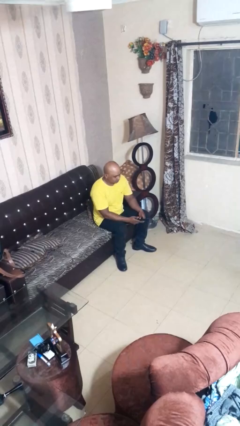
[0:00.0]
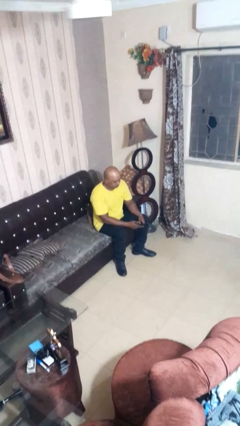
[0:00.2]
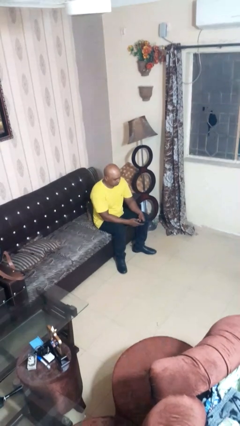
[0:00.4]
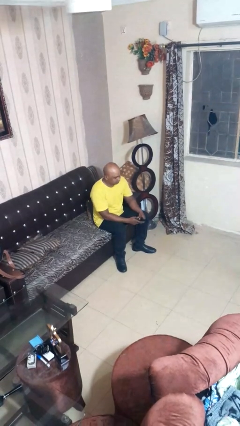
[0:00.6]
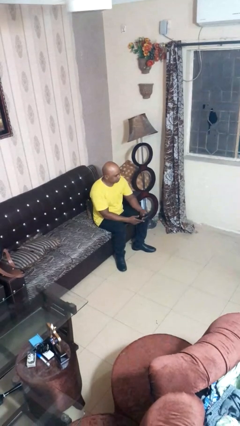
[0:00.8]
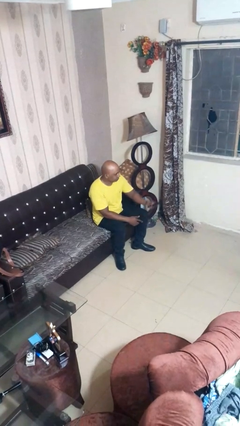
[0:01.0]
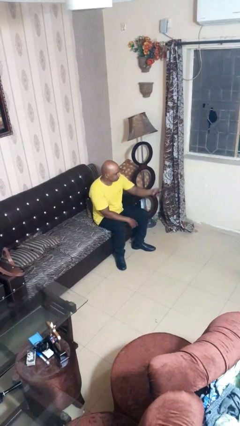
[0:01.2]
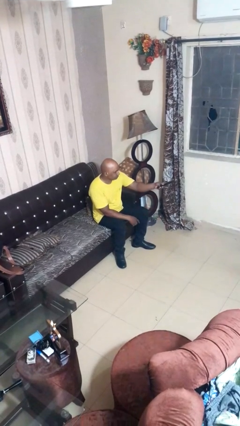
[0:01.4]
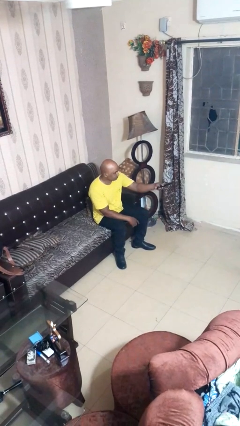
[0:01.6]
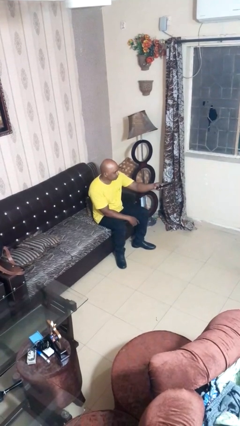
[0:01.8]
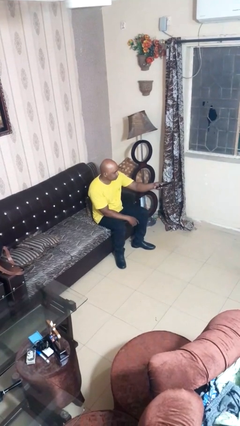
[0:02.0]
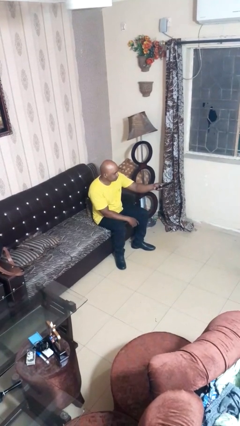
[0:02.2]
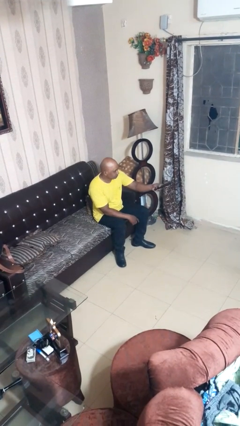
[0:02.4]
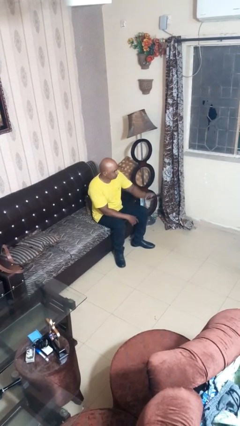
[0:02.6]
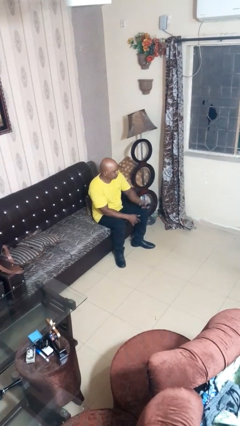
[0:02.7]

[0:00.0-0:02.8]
person uses television remote

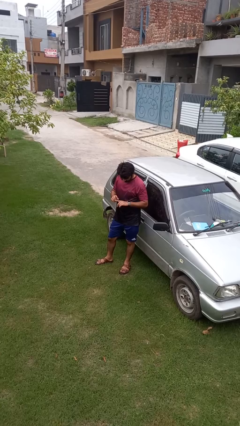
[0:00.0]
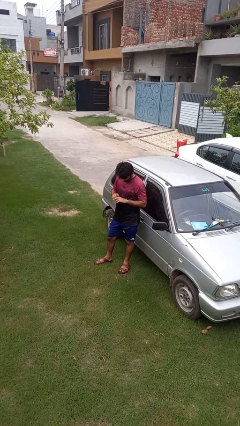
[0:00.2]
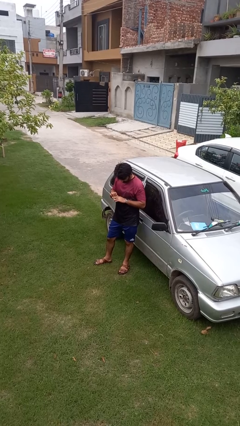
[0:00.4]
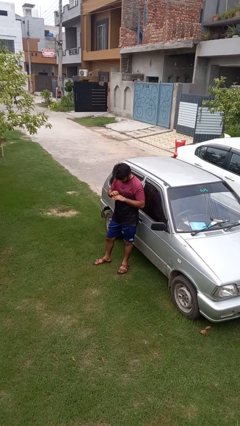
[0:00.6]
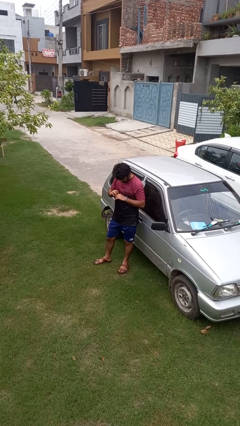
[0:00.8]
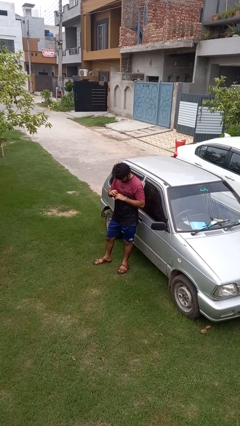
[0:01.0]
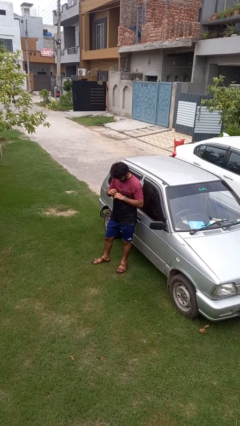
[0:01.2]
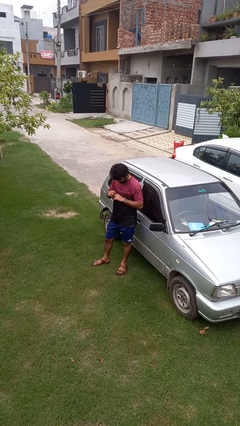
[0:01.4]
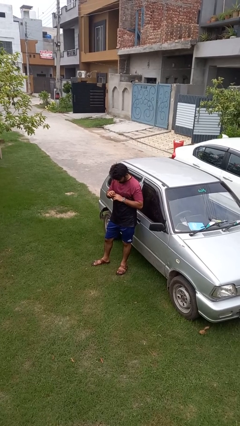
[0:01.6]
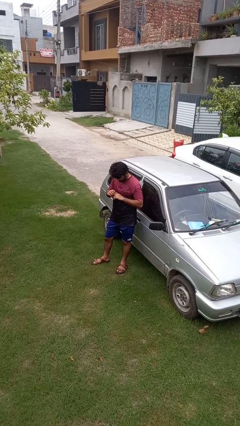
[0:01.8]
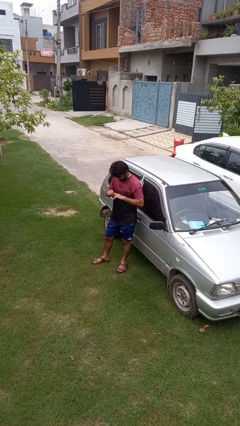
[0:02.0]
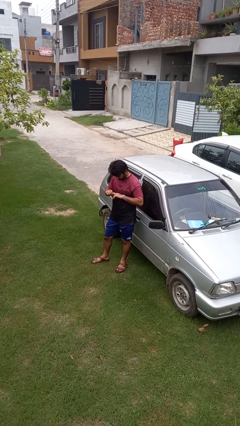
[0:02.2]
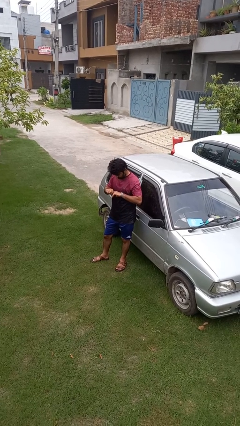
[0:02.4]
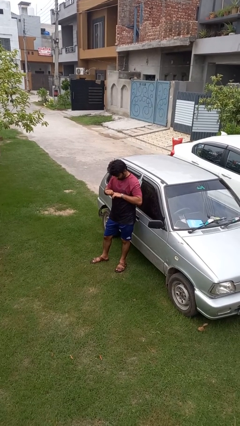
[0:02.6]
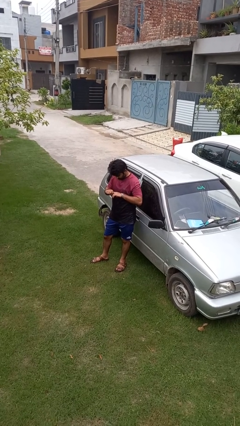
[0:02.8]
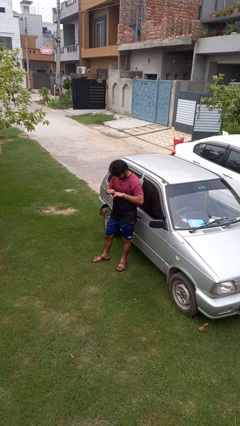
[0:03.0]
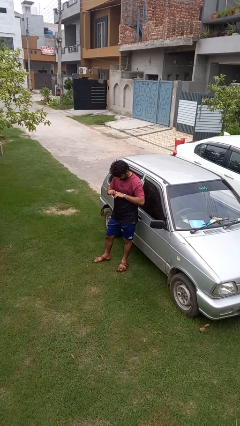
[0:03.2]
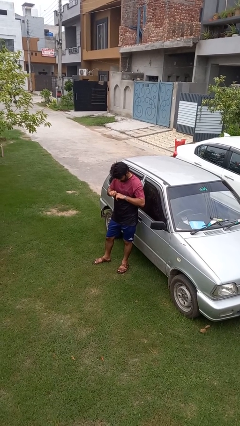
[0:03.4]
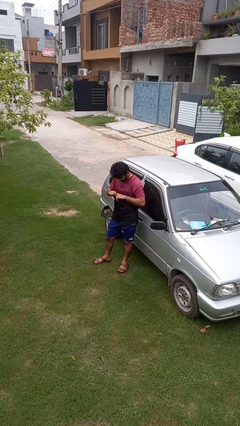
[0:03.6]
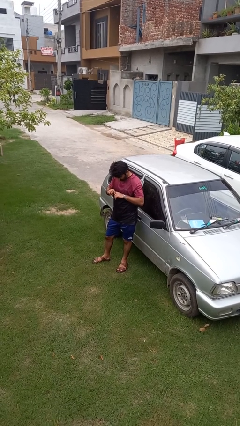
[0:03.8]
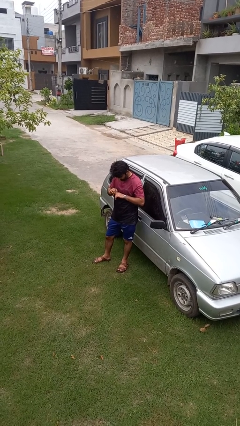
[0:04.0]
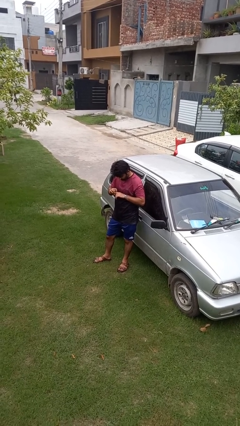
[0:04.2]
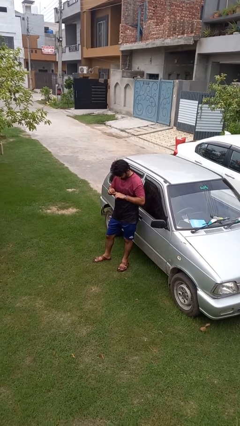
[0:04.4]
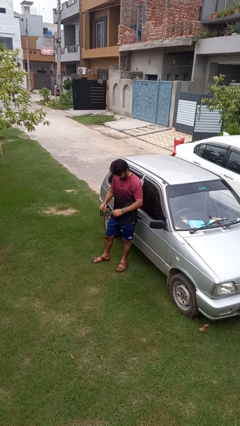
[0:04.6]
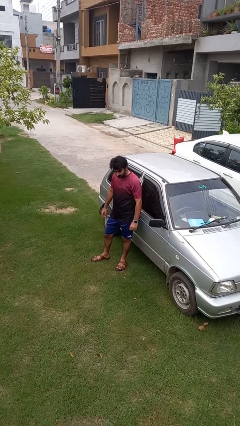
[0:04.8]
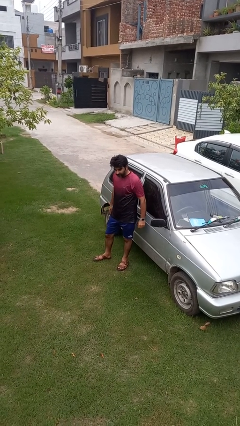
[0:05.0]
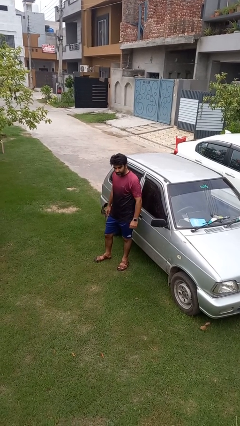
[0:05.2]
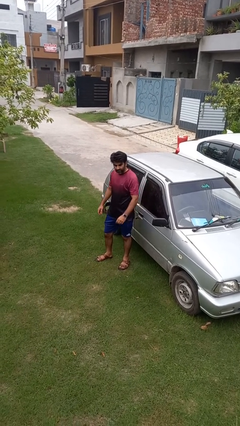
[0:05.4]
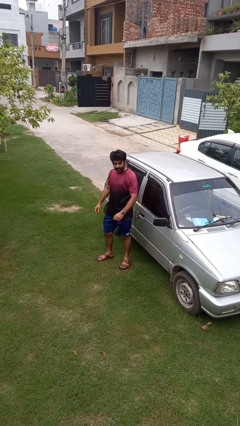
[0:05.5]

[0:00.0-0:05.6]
person cracks knuckles

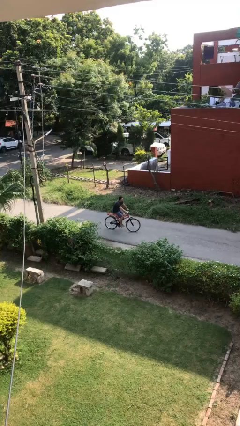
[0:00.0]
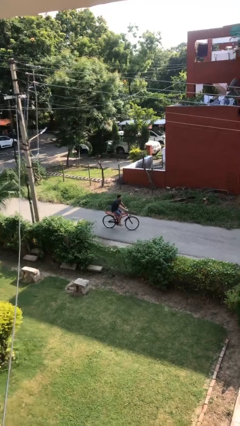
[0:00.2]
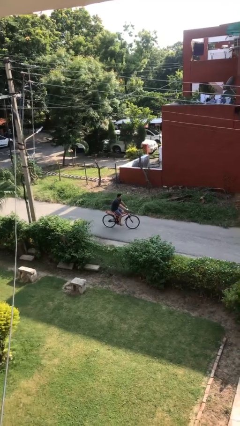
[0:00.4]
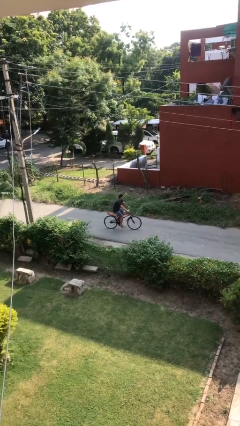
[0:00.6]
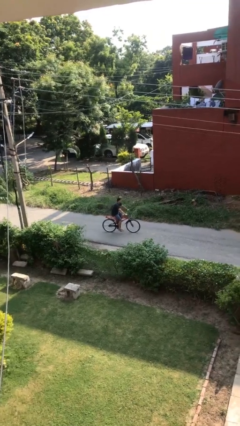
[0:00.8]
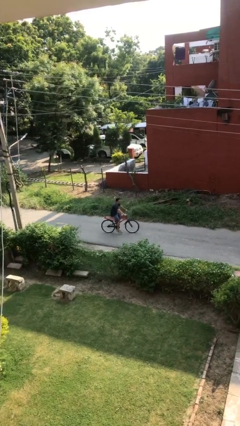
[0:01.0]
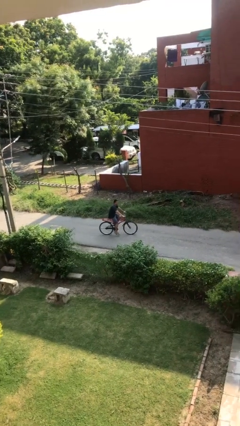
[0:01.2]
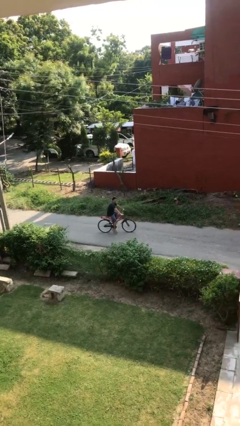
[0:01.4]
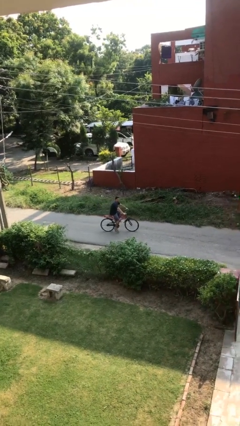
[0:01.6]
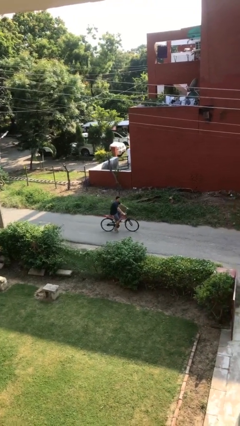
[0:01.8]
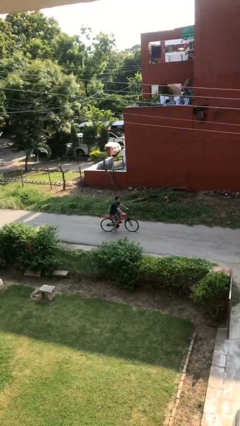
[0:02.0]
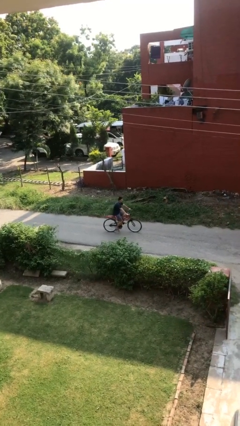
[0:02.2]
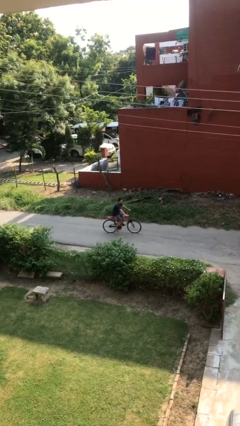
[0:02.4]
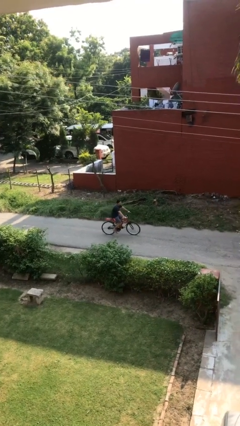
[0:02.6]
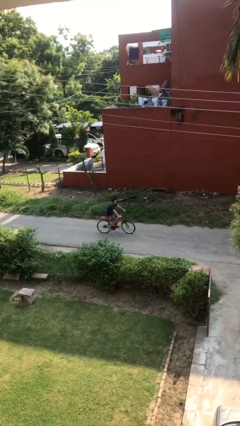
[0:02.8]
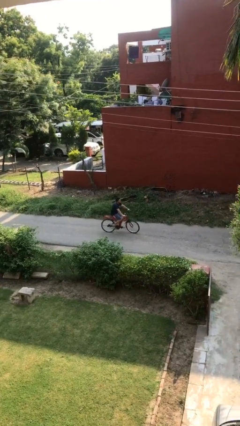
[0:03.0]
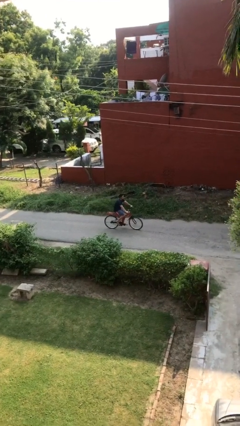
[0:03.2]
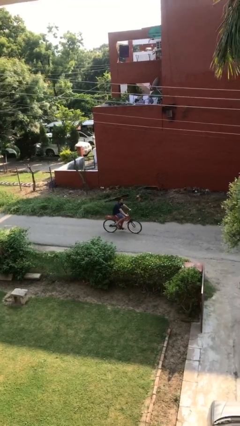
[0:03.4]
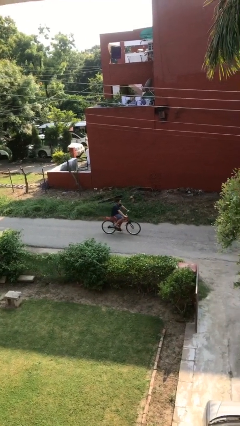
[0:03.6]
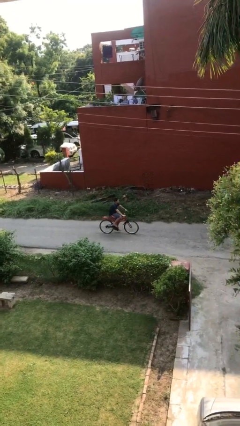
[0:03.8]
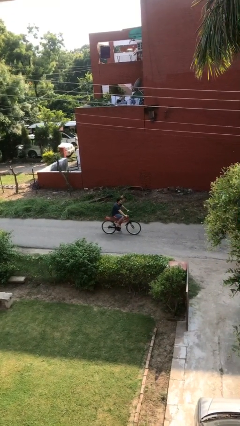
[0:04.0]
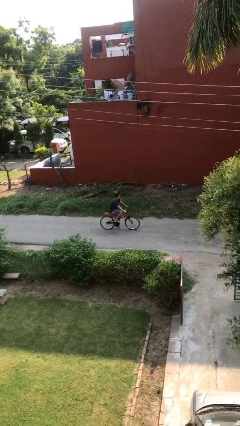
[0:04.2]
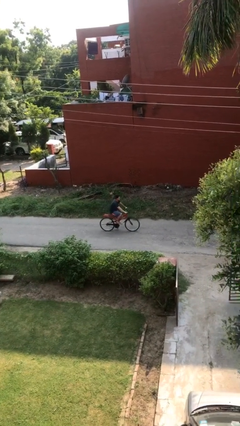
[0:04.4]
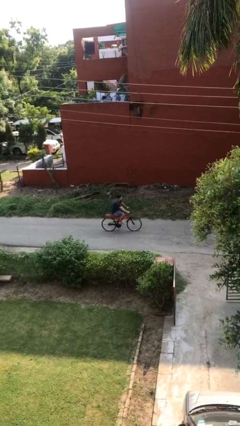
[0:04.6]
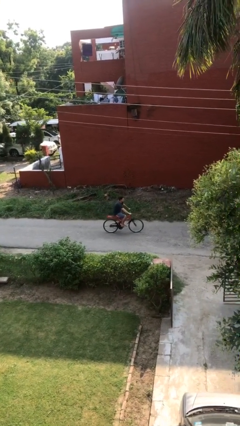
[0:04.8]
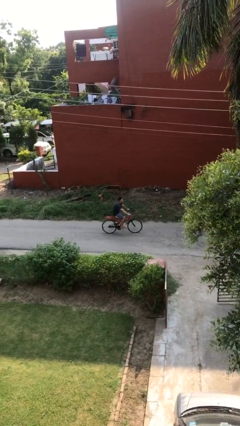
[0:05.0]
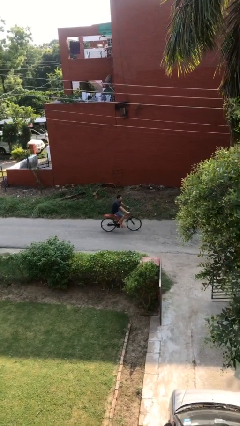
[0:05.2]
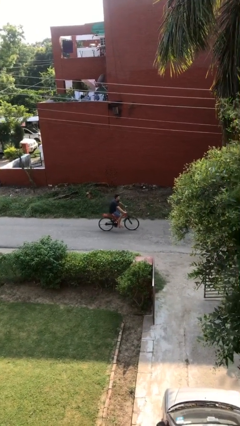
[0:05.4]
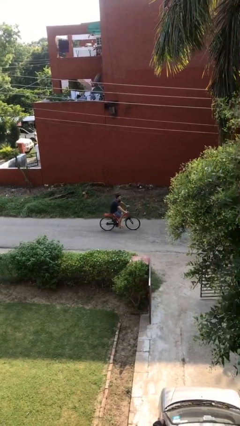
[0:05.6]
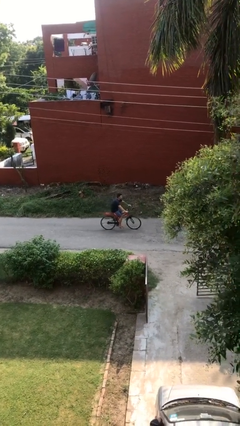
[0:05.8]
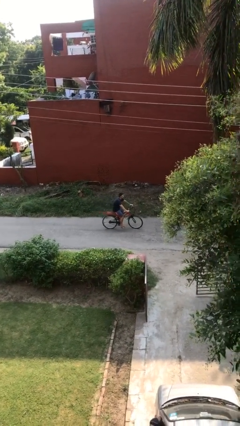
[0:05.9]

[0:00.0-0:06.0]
person rides bicycle

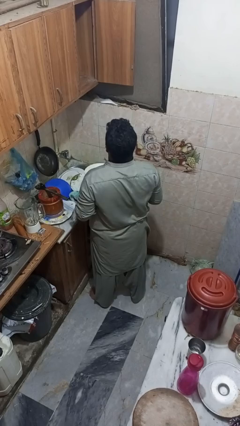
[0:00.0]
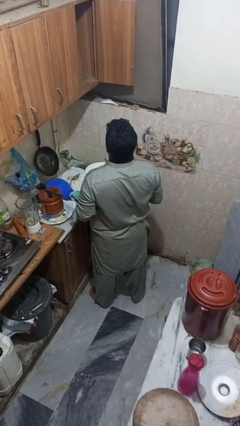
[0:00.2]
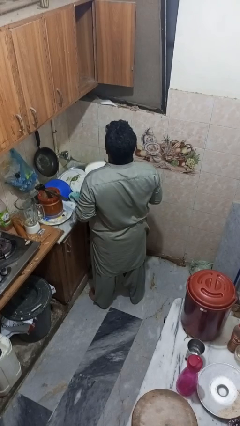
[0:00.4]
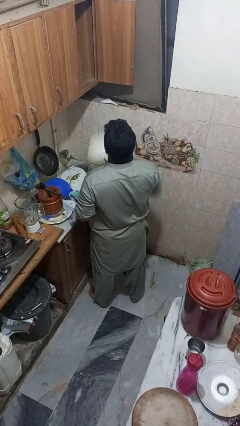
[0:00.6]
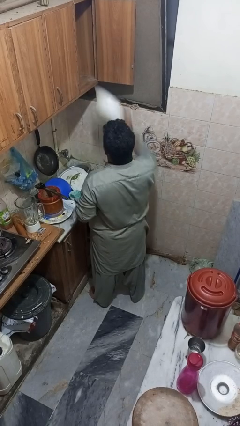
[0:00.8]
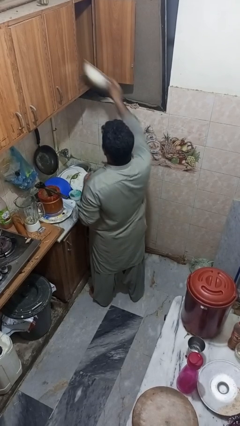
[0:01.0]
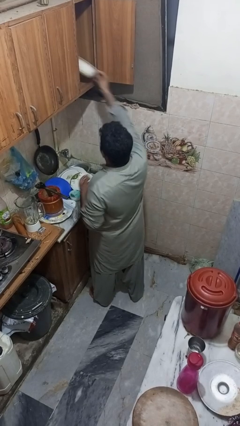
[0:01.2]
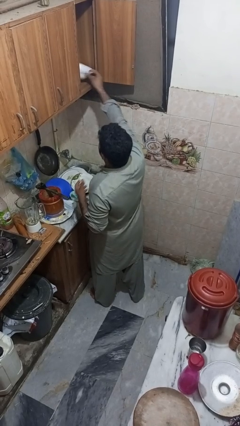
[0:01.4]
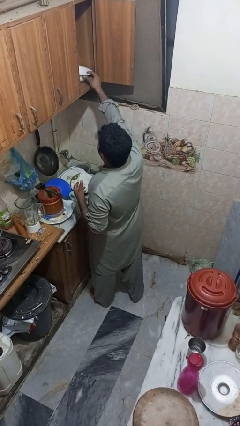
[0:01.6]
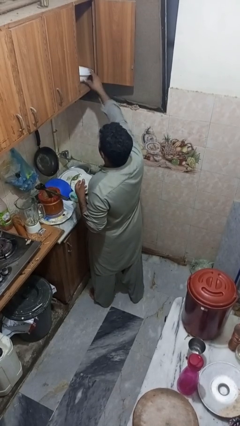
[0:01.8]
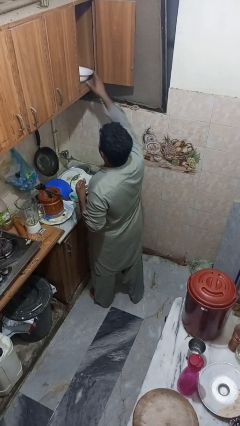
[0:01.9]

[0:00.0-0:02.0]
person puts object in cabinet

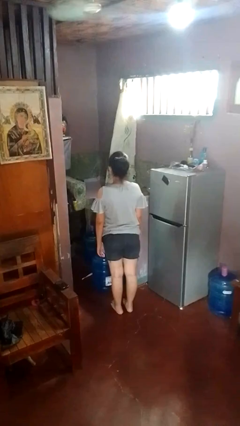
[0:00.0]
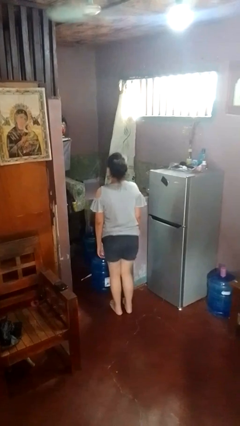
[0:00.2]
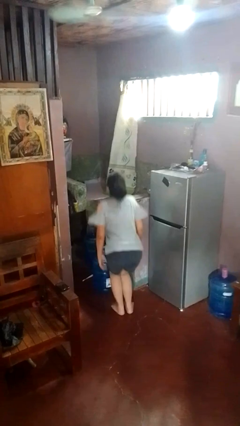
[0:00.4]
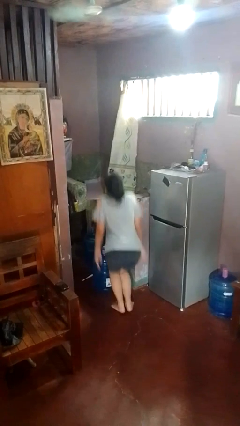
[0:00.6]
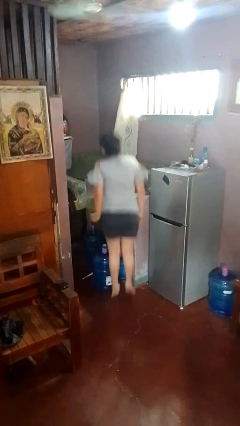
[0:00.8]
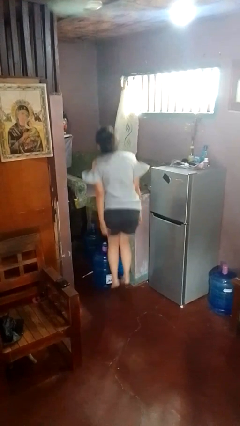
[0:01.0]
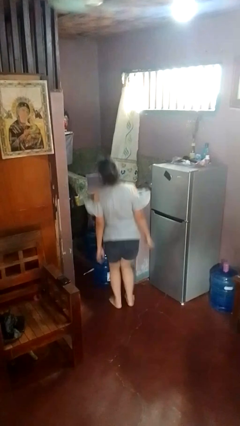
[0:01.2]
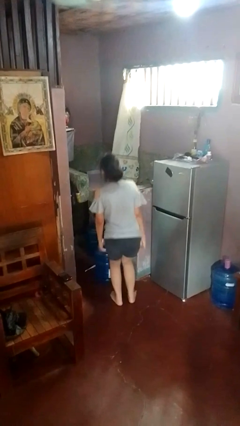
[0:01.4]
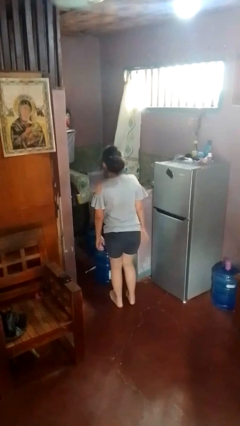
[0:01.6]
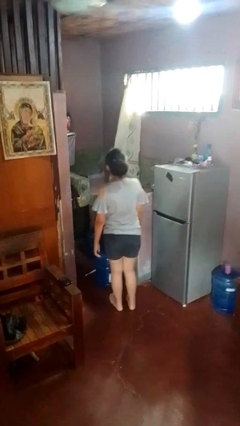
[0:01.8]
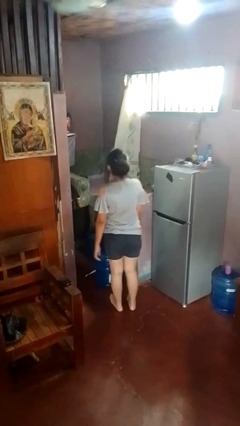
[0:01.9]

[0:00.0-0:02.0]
person jumps
